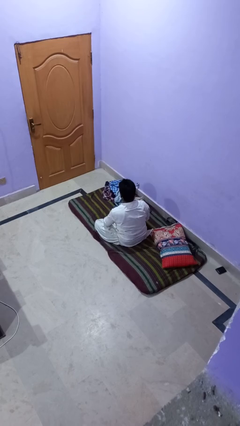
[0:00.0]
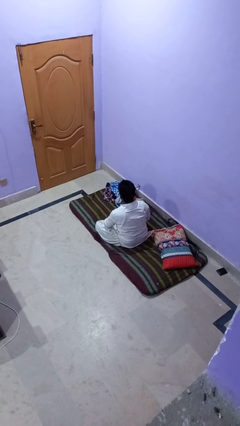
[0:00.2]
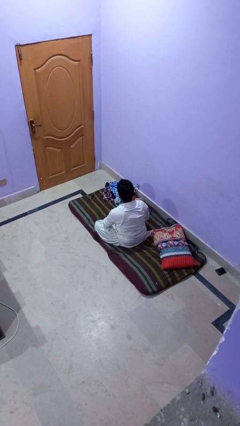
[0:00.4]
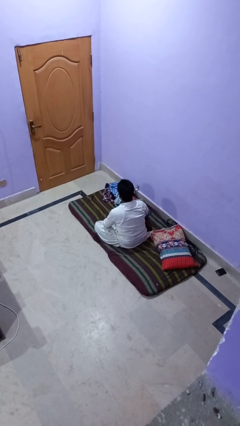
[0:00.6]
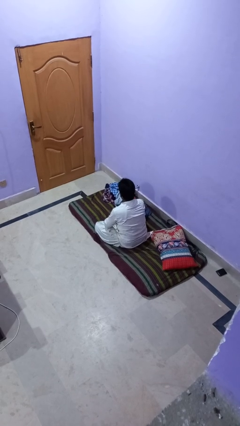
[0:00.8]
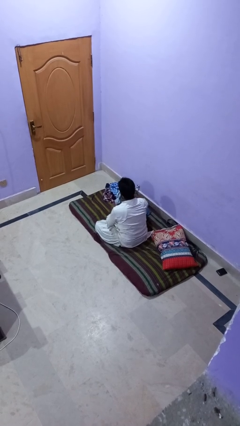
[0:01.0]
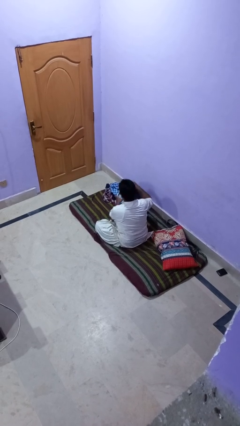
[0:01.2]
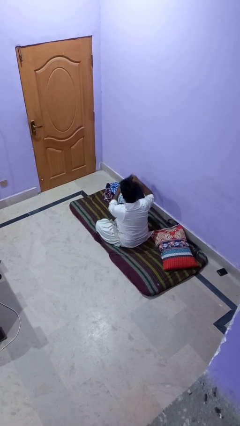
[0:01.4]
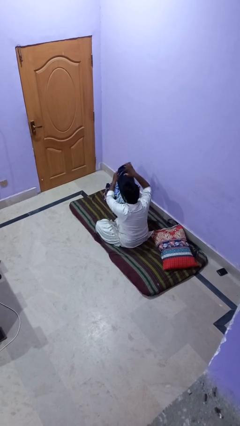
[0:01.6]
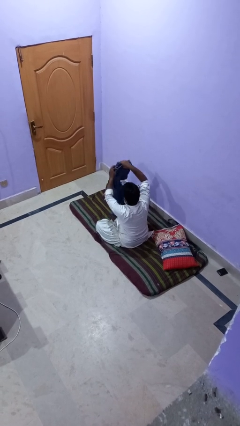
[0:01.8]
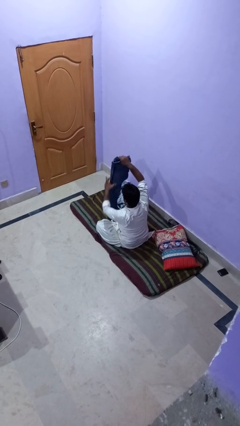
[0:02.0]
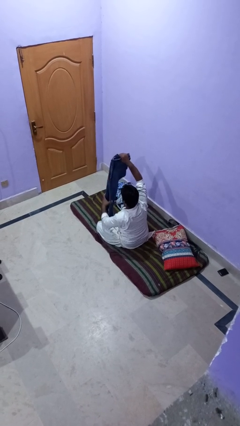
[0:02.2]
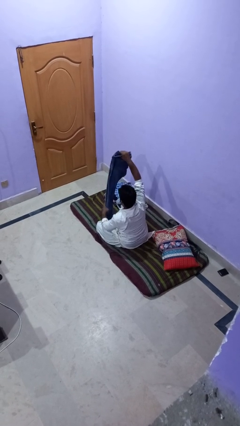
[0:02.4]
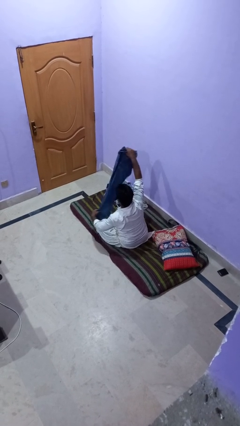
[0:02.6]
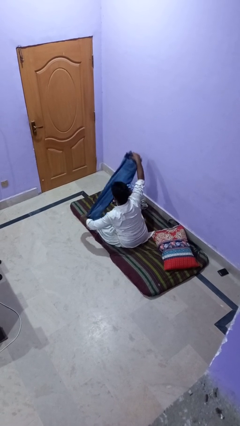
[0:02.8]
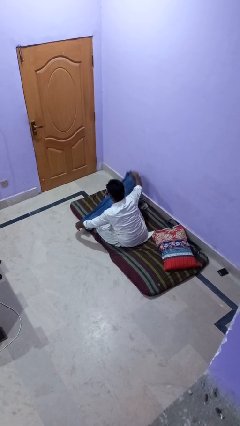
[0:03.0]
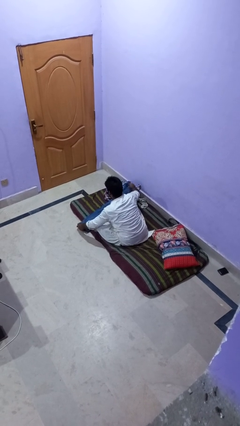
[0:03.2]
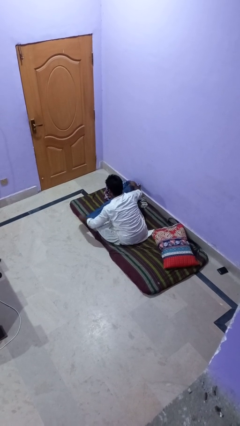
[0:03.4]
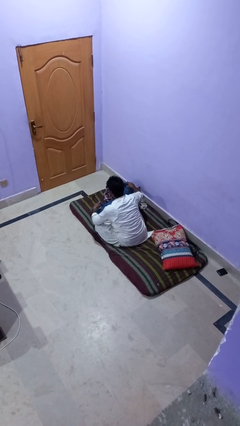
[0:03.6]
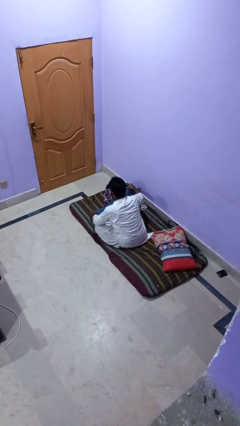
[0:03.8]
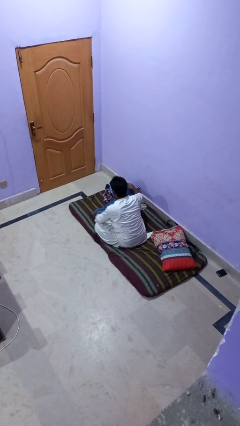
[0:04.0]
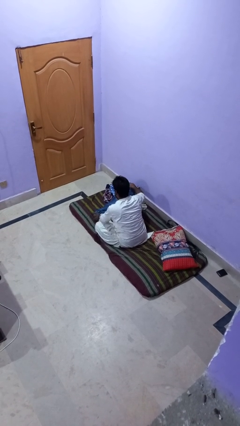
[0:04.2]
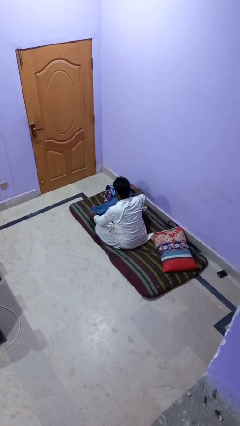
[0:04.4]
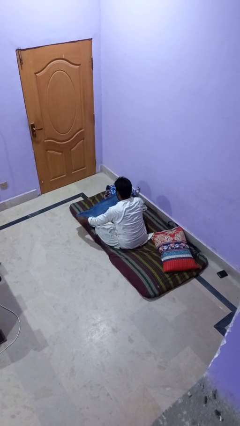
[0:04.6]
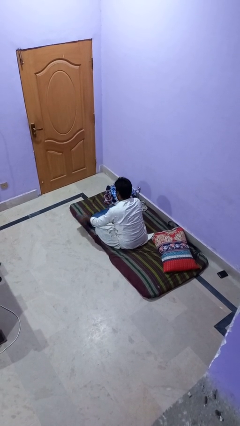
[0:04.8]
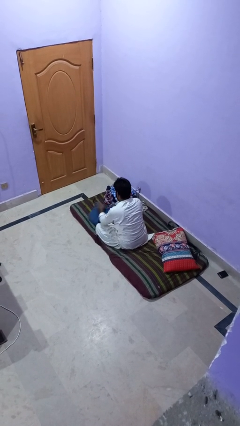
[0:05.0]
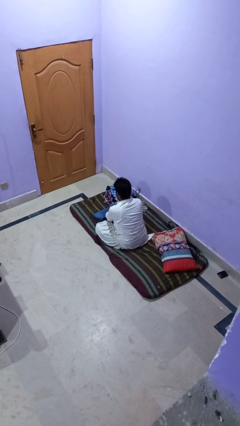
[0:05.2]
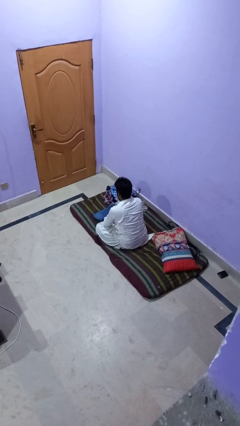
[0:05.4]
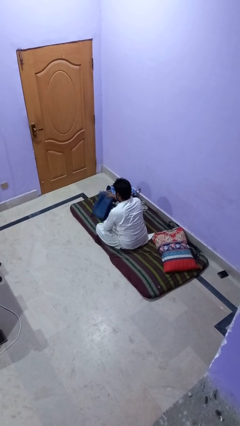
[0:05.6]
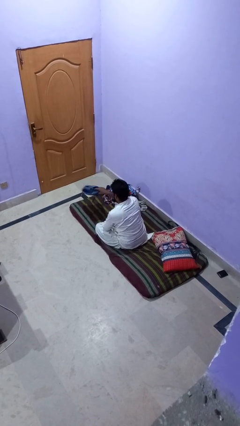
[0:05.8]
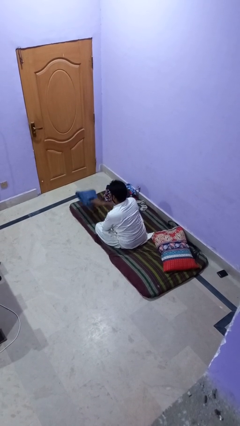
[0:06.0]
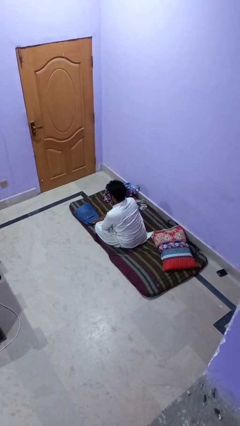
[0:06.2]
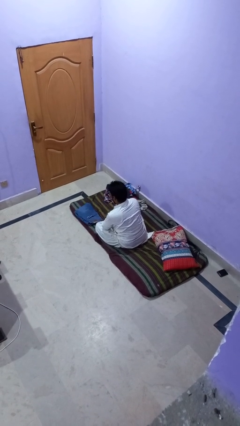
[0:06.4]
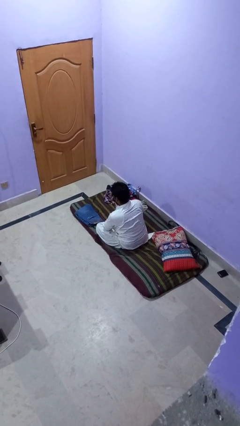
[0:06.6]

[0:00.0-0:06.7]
person folds pants

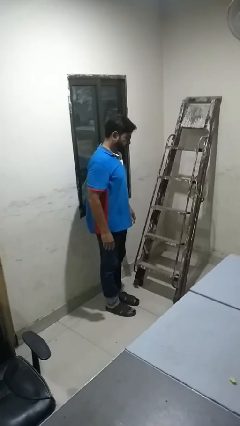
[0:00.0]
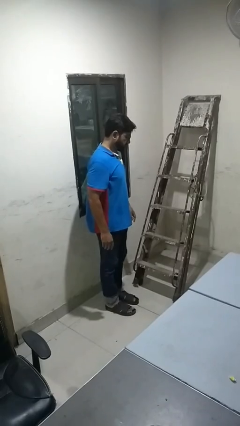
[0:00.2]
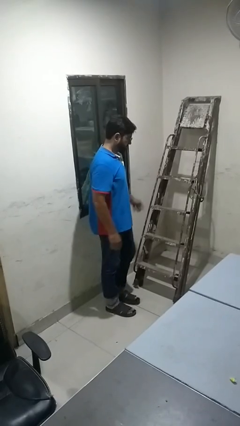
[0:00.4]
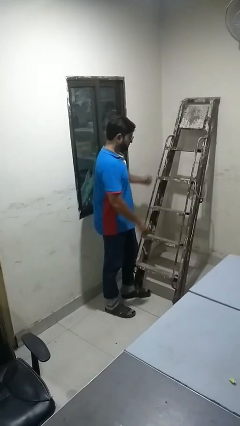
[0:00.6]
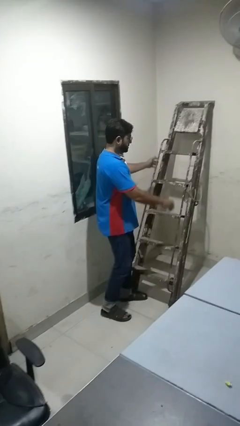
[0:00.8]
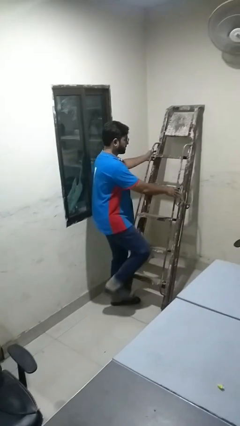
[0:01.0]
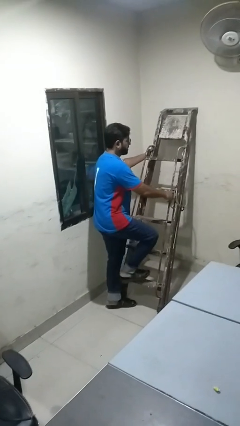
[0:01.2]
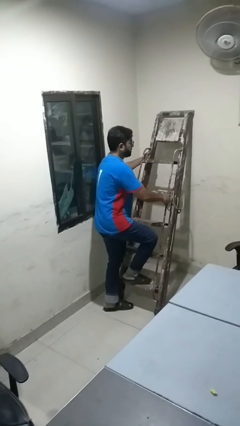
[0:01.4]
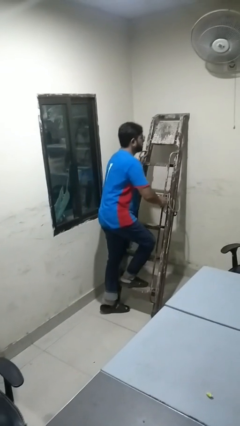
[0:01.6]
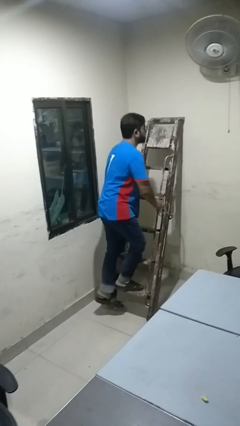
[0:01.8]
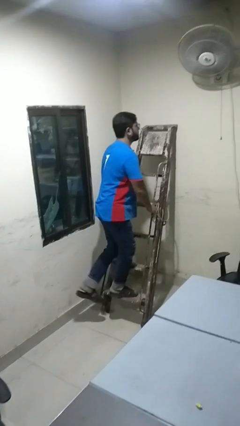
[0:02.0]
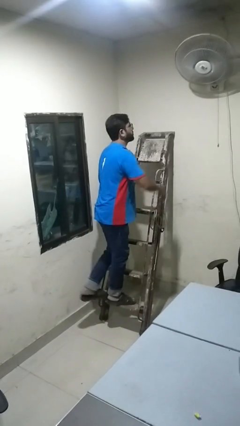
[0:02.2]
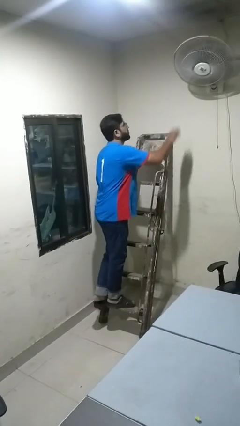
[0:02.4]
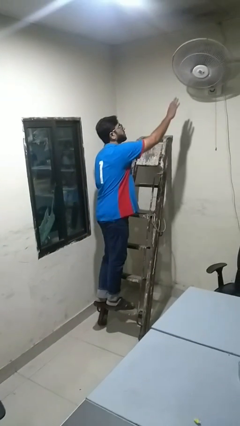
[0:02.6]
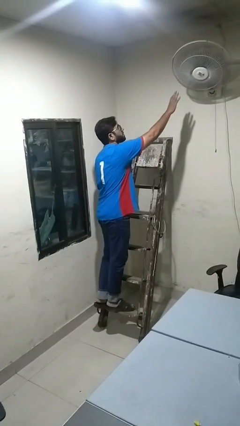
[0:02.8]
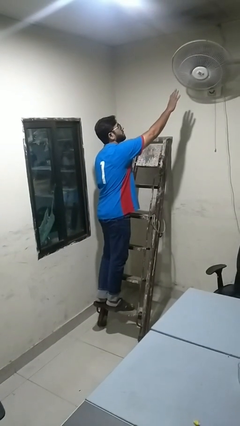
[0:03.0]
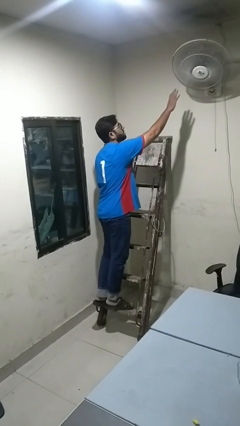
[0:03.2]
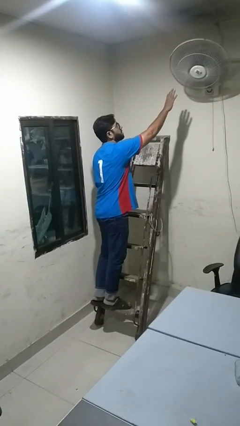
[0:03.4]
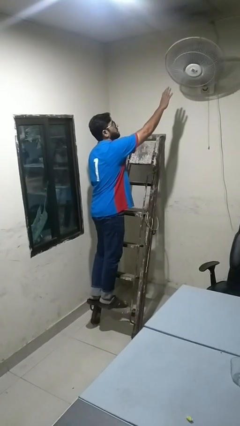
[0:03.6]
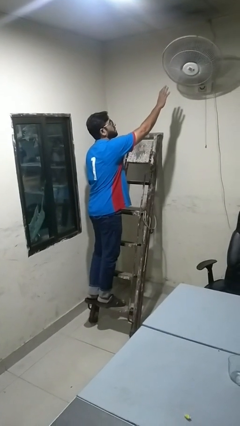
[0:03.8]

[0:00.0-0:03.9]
person climbs up ladder

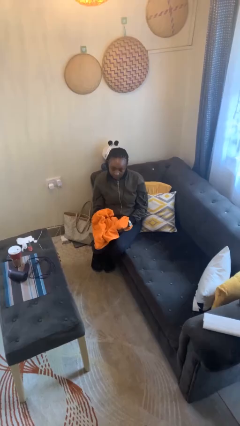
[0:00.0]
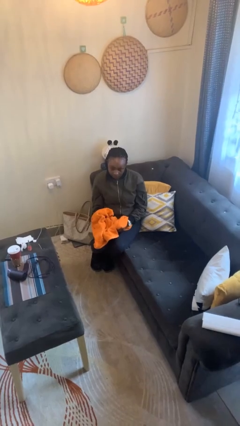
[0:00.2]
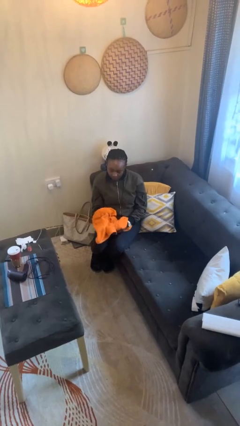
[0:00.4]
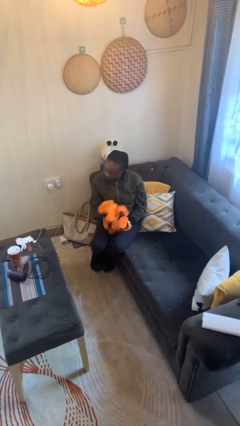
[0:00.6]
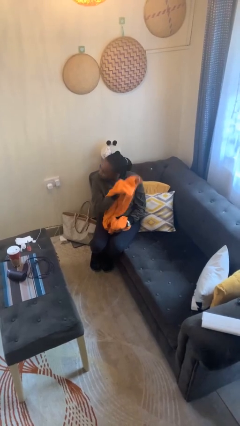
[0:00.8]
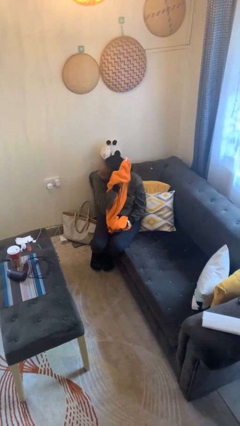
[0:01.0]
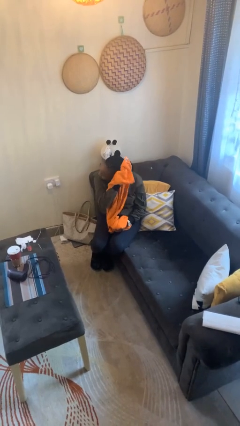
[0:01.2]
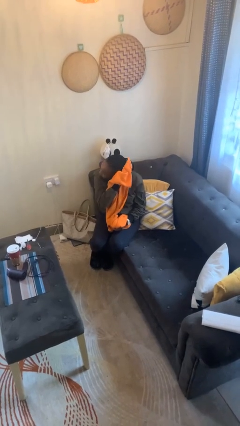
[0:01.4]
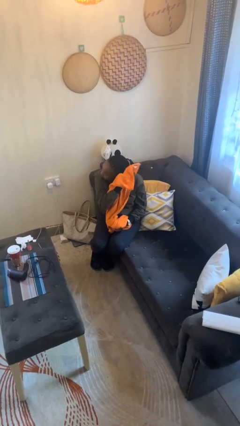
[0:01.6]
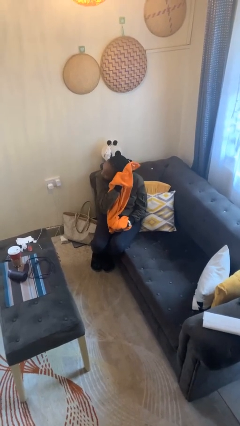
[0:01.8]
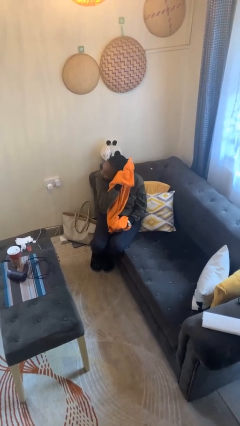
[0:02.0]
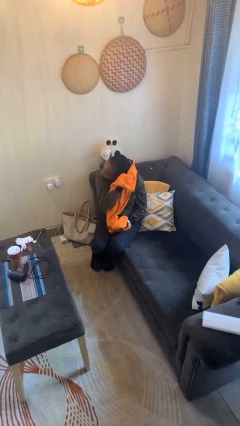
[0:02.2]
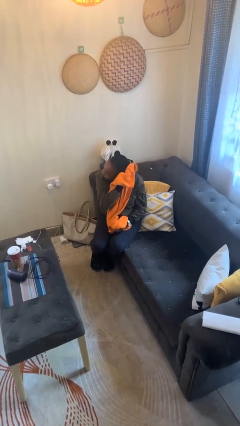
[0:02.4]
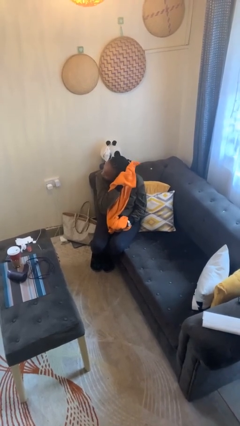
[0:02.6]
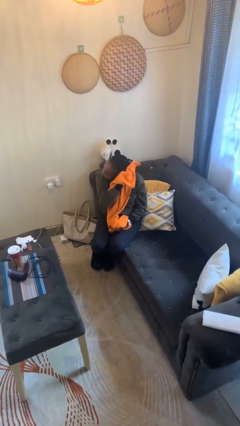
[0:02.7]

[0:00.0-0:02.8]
person dries hair with towel

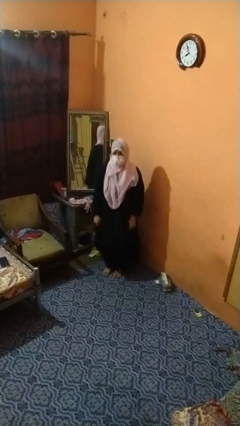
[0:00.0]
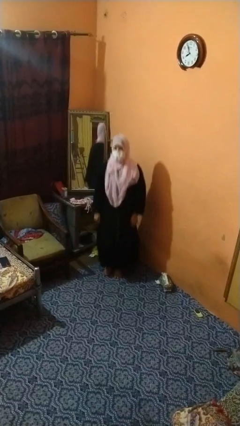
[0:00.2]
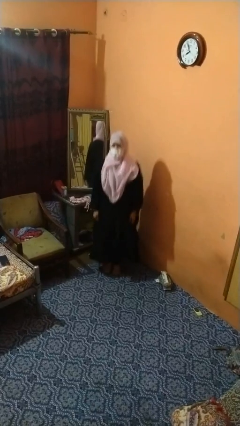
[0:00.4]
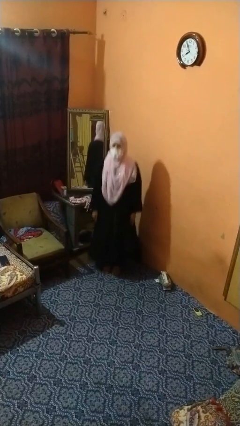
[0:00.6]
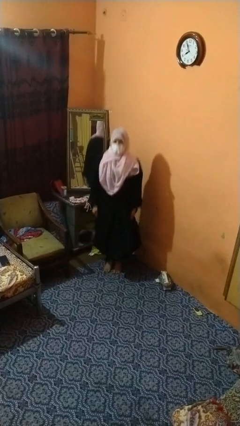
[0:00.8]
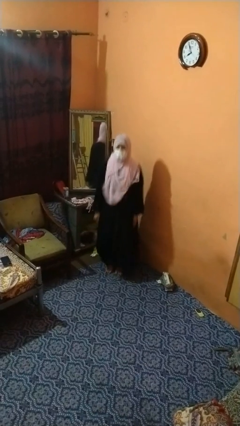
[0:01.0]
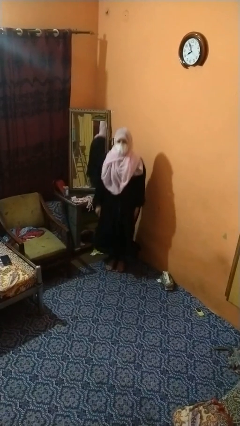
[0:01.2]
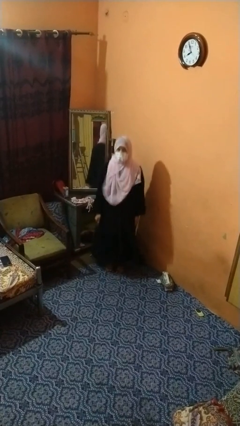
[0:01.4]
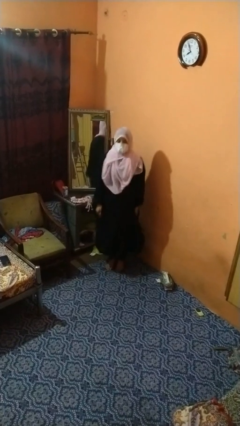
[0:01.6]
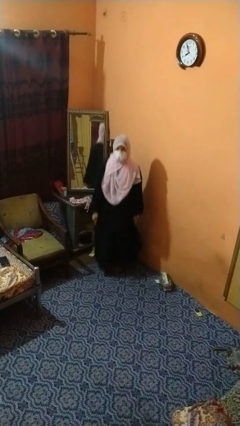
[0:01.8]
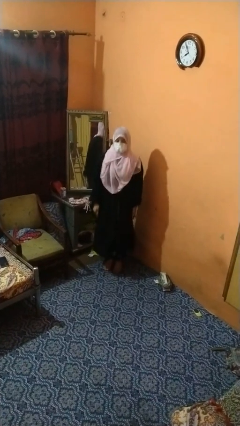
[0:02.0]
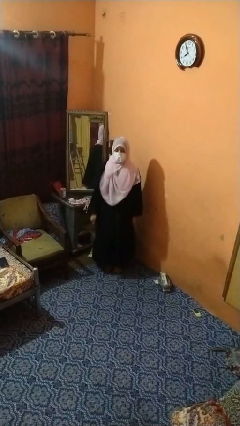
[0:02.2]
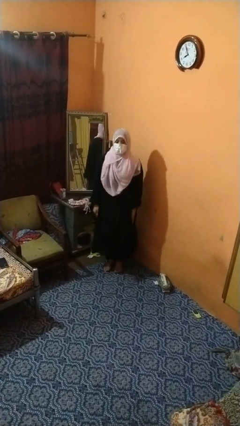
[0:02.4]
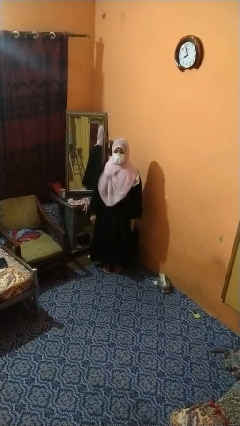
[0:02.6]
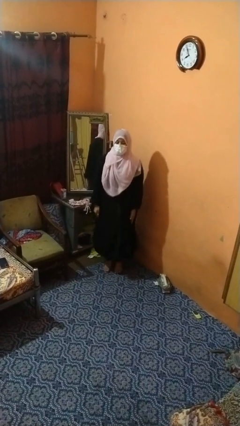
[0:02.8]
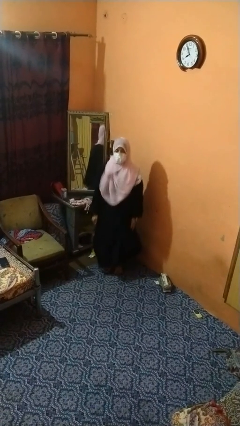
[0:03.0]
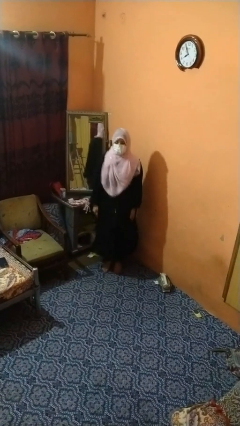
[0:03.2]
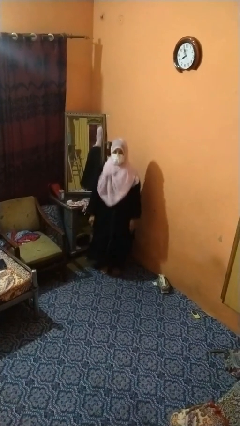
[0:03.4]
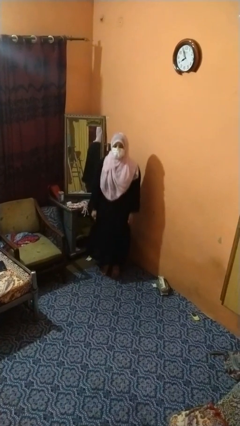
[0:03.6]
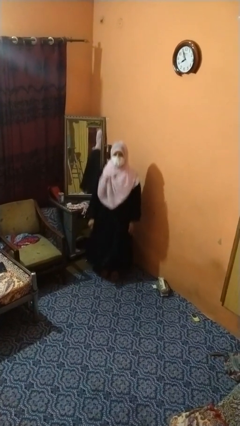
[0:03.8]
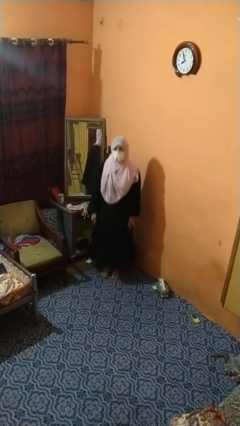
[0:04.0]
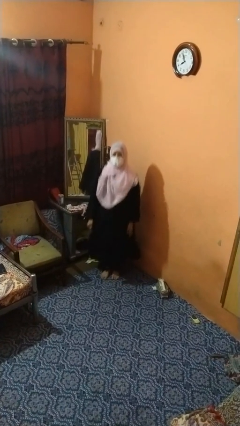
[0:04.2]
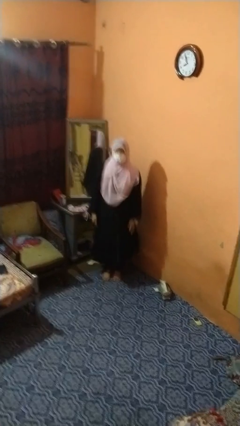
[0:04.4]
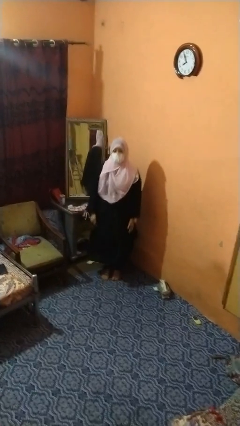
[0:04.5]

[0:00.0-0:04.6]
person jumps
